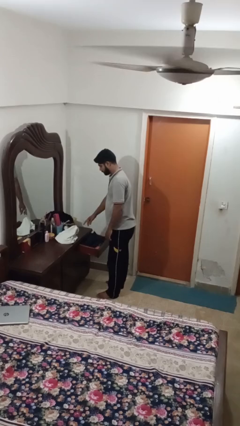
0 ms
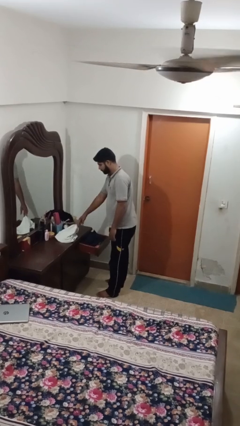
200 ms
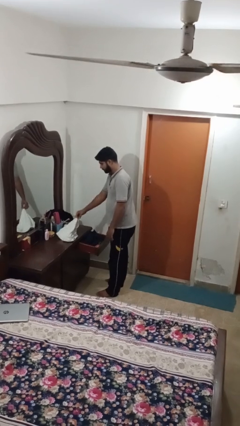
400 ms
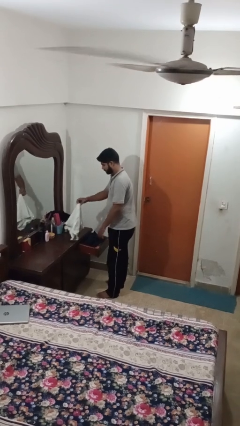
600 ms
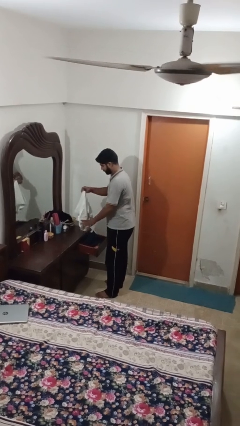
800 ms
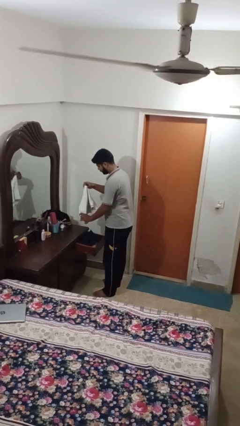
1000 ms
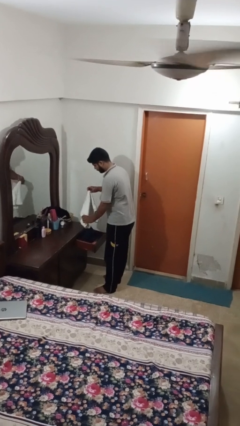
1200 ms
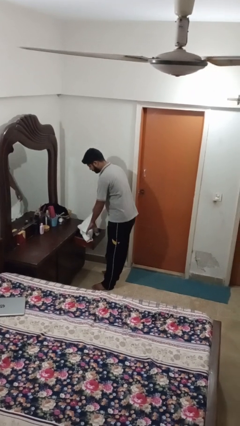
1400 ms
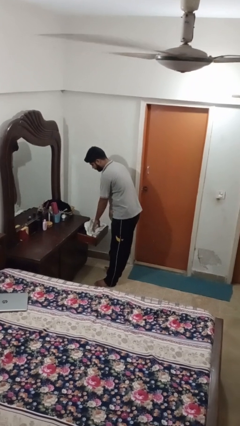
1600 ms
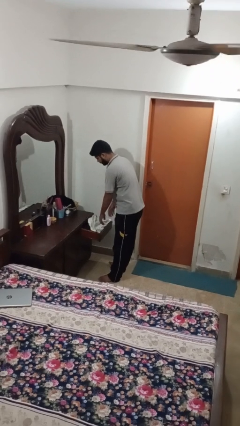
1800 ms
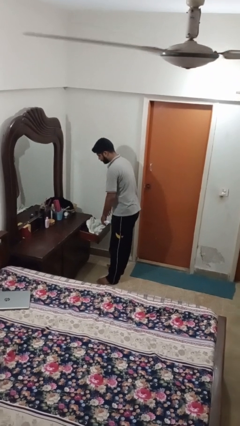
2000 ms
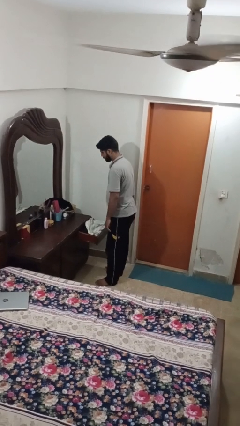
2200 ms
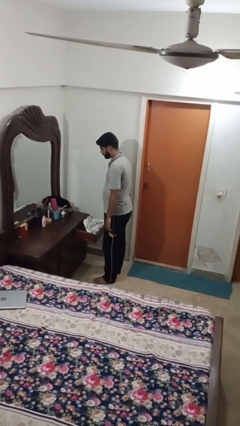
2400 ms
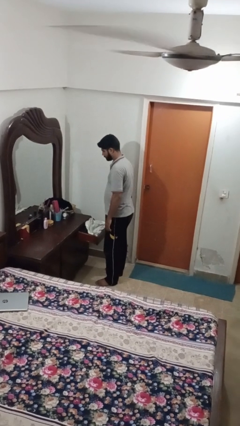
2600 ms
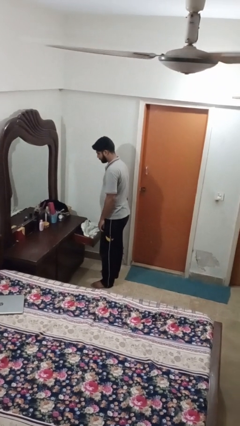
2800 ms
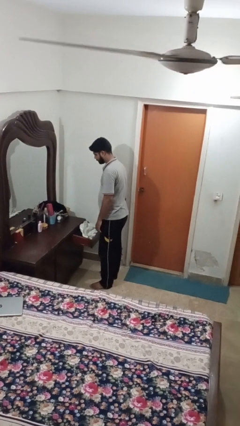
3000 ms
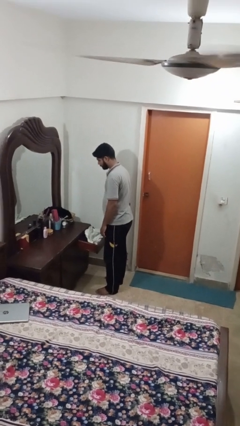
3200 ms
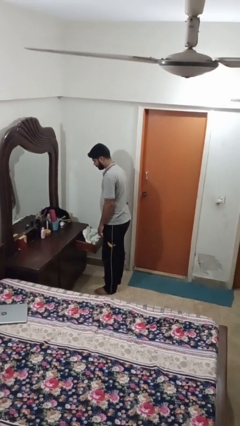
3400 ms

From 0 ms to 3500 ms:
person puts clothes into dresser

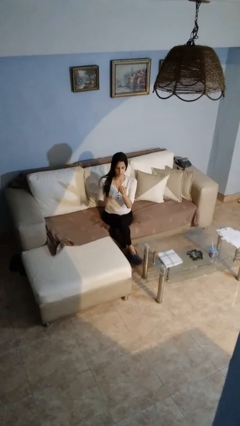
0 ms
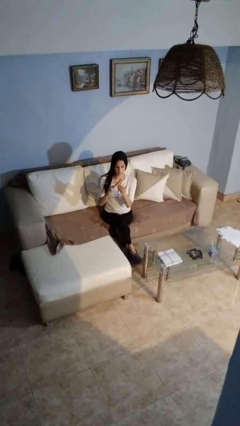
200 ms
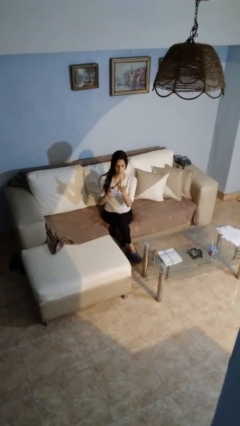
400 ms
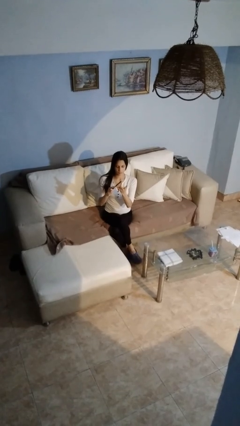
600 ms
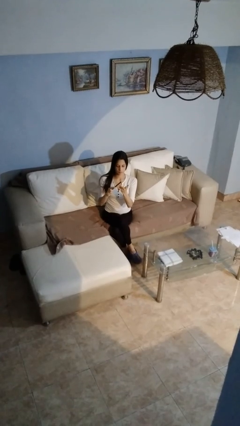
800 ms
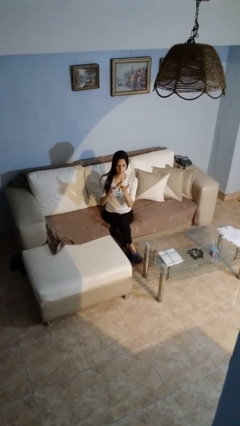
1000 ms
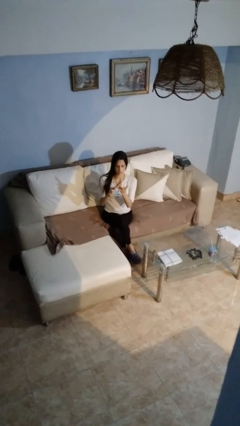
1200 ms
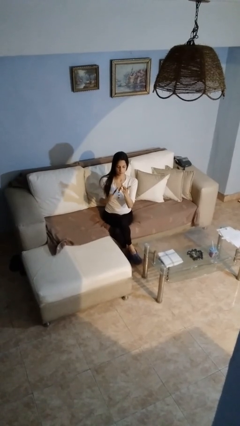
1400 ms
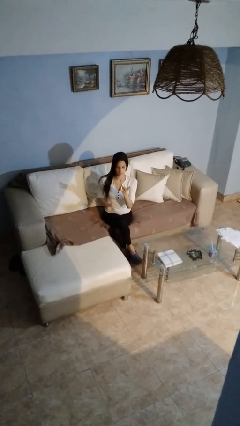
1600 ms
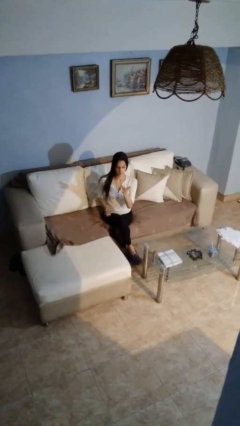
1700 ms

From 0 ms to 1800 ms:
person files fingernails

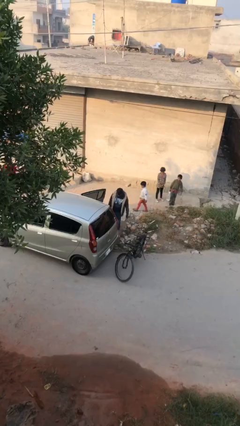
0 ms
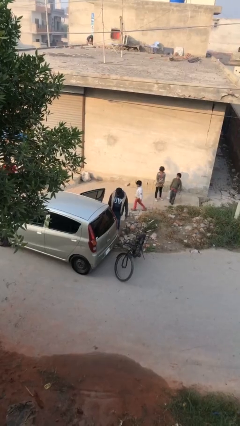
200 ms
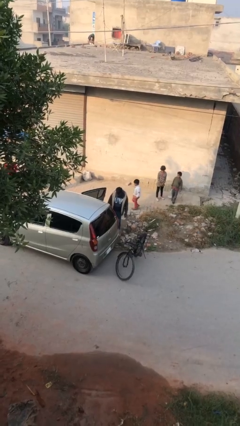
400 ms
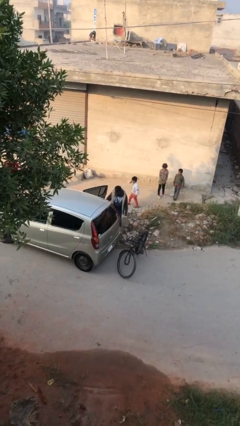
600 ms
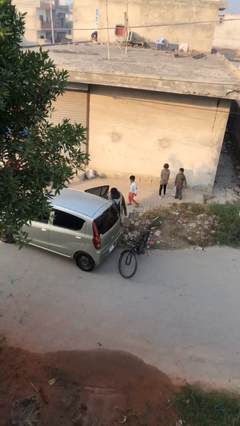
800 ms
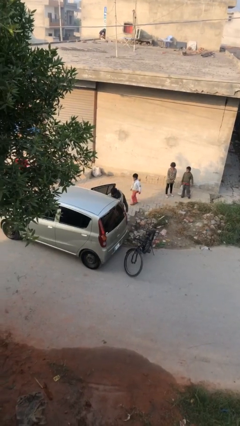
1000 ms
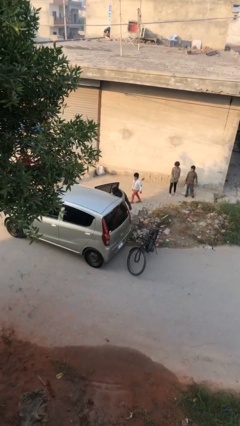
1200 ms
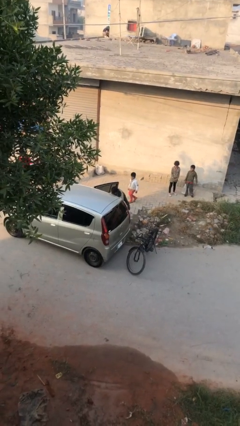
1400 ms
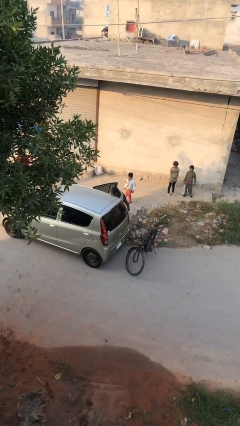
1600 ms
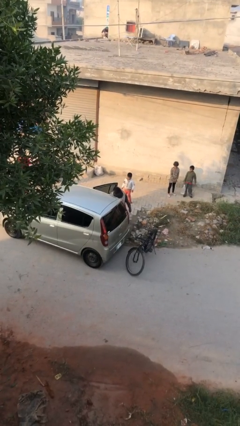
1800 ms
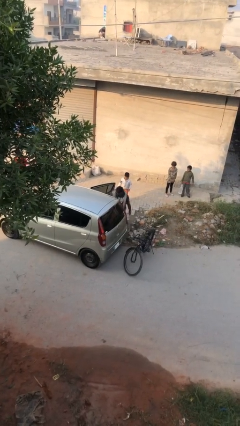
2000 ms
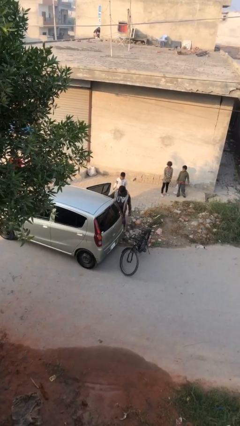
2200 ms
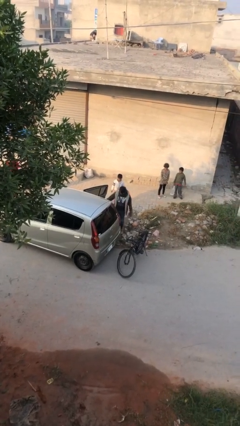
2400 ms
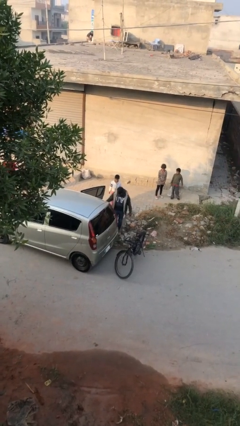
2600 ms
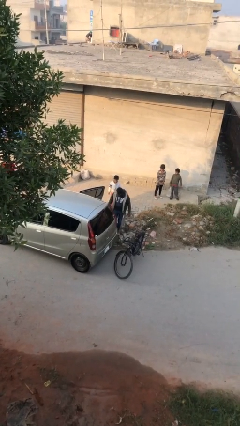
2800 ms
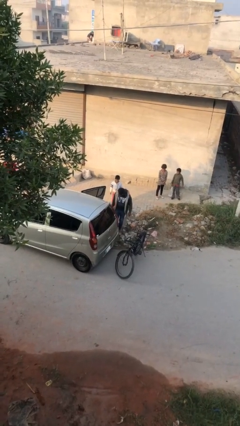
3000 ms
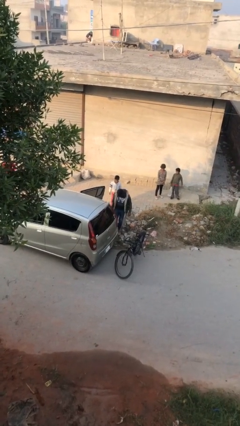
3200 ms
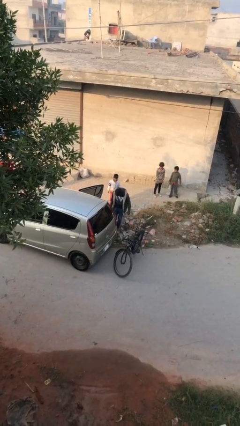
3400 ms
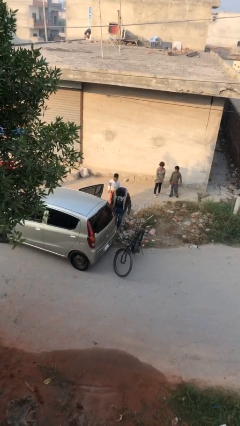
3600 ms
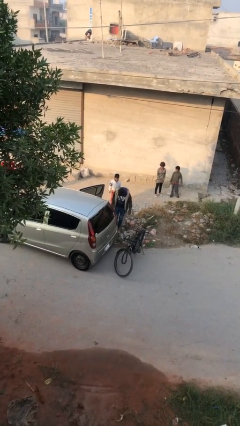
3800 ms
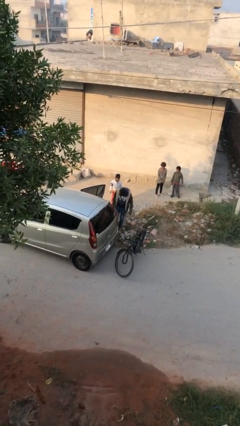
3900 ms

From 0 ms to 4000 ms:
person unloads car

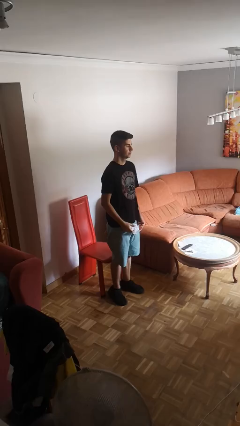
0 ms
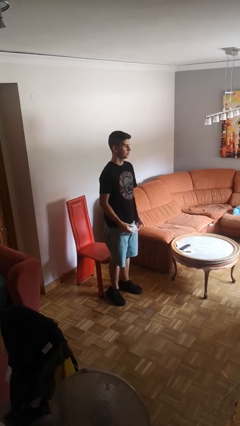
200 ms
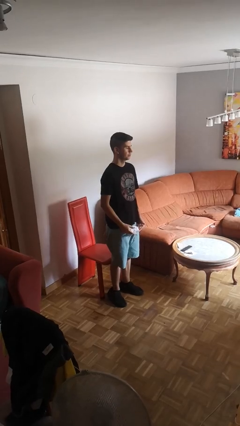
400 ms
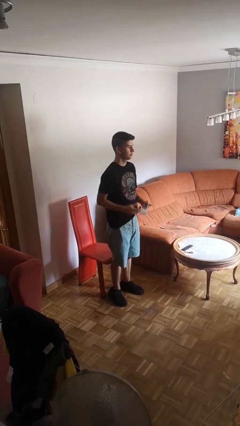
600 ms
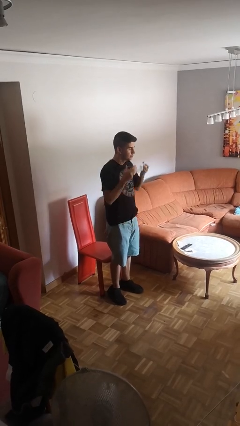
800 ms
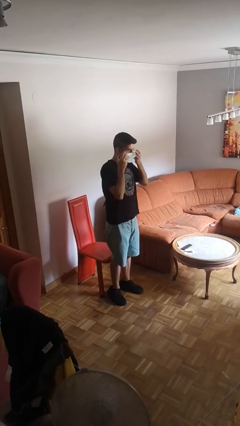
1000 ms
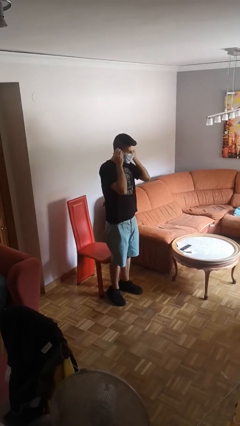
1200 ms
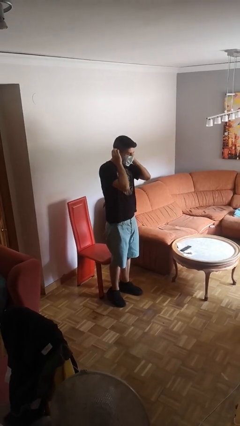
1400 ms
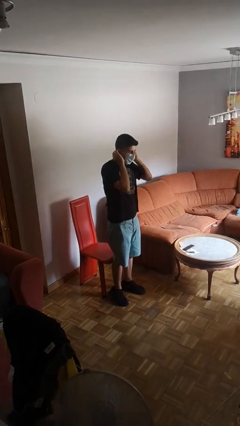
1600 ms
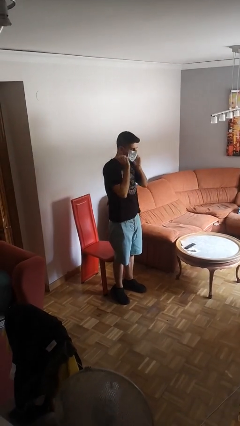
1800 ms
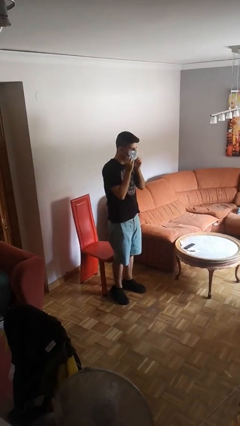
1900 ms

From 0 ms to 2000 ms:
person puts on facemask

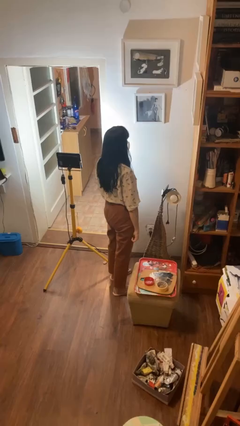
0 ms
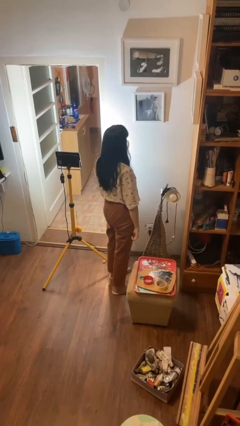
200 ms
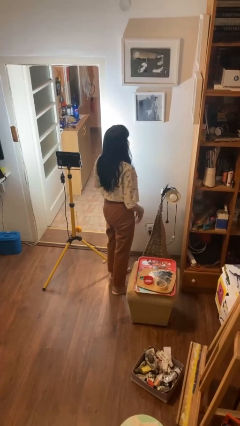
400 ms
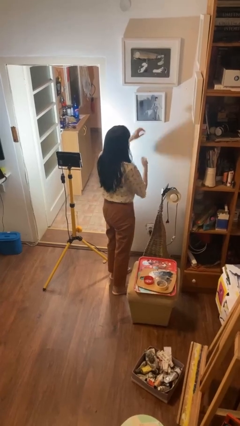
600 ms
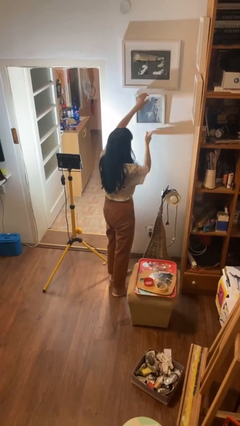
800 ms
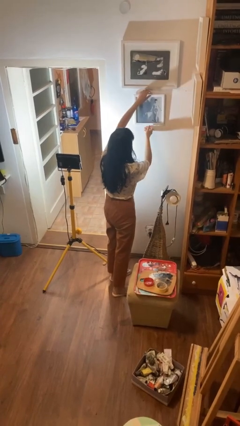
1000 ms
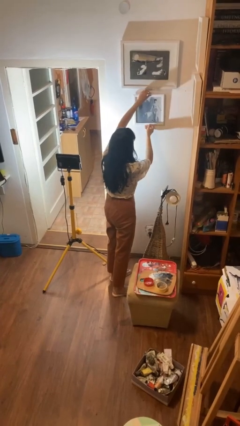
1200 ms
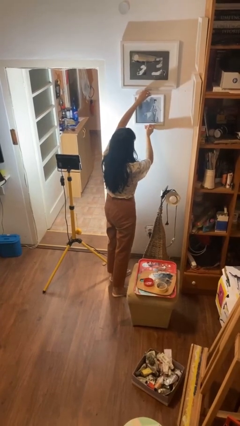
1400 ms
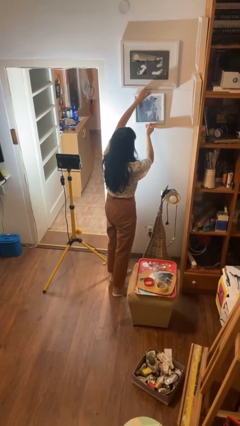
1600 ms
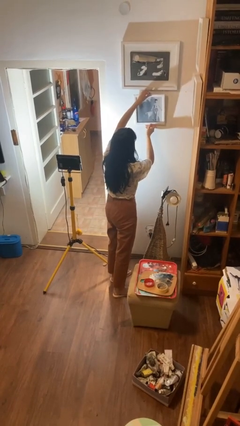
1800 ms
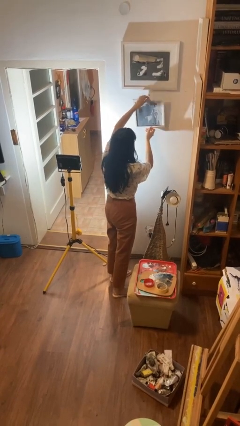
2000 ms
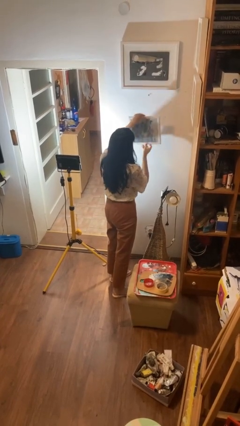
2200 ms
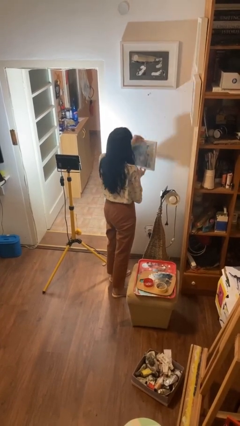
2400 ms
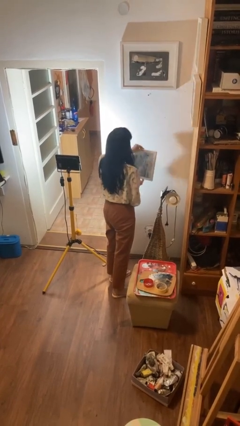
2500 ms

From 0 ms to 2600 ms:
person takes down picture frame

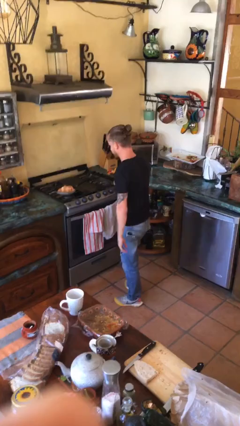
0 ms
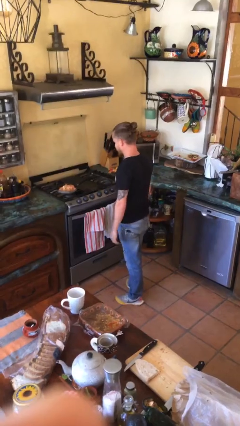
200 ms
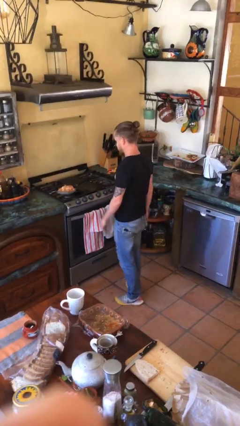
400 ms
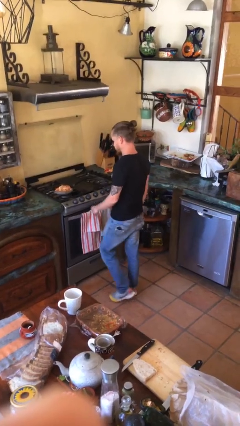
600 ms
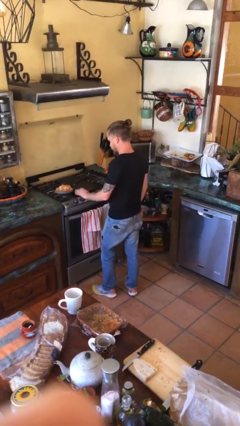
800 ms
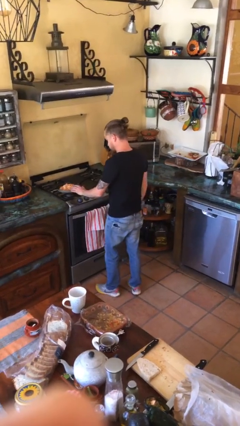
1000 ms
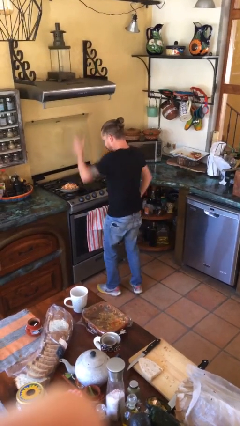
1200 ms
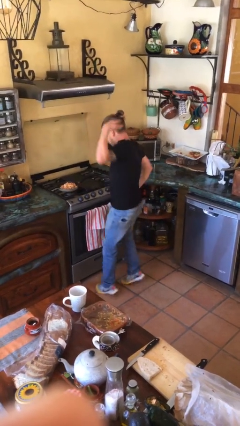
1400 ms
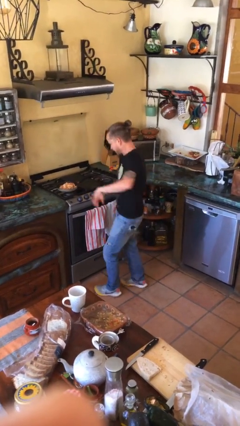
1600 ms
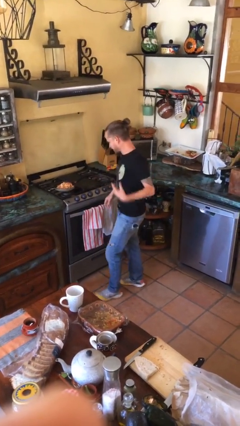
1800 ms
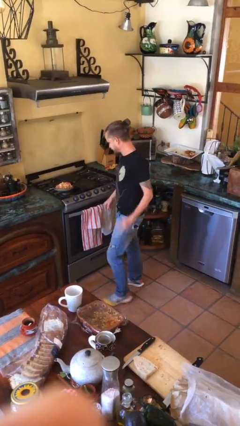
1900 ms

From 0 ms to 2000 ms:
person burns hand

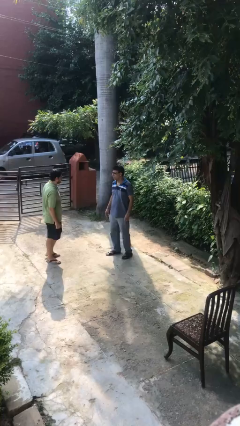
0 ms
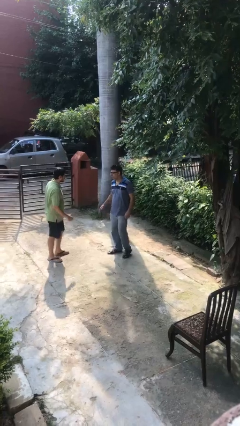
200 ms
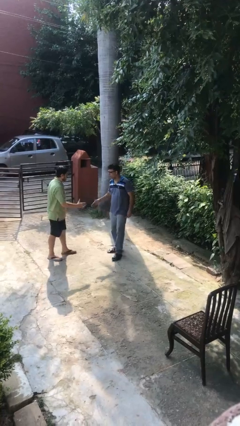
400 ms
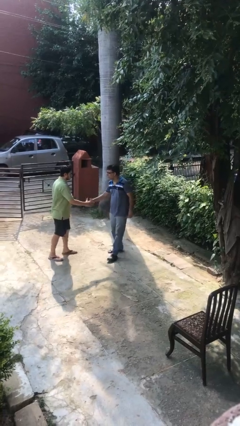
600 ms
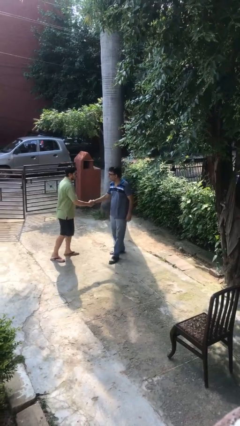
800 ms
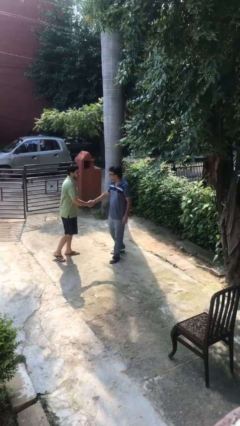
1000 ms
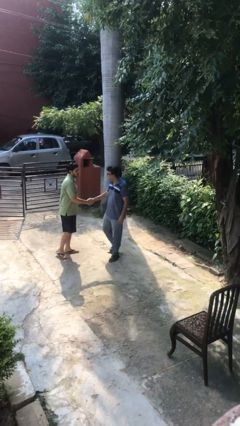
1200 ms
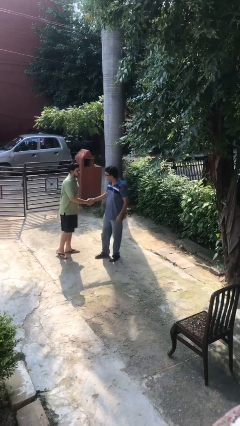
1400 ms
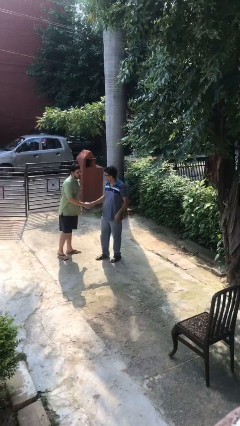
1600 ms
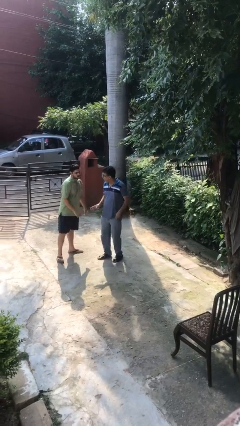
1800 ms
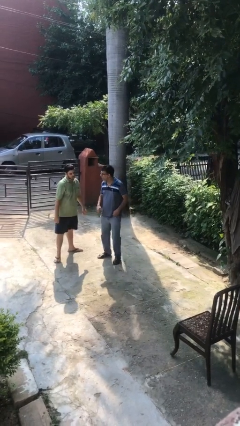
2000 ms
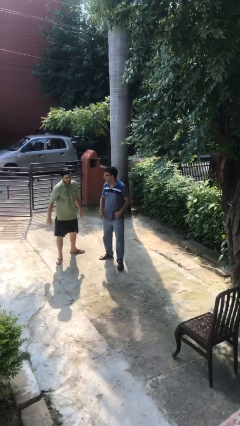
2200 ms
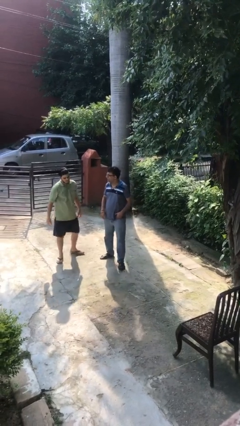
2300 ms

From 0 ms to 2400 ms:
person shakes hand
